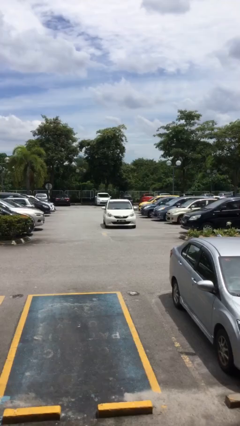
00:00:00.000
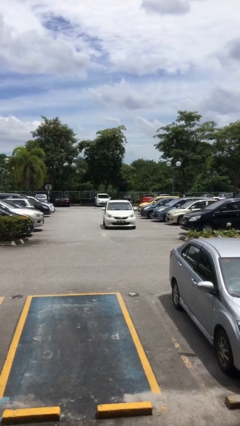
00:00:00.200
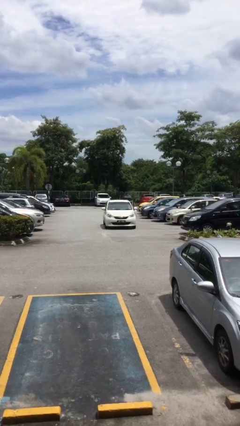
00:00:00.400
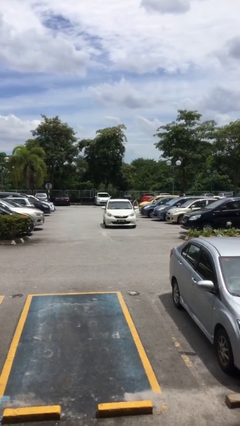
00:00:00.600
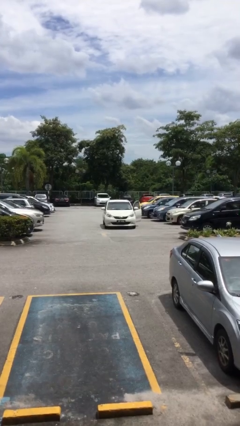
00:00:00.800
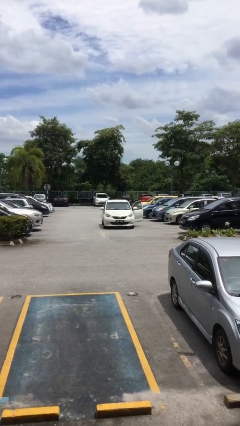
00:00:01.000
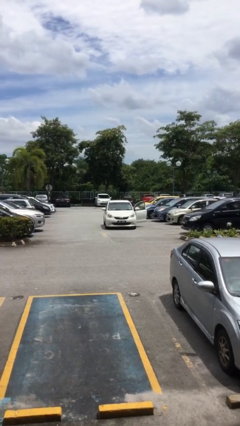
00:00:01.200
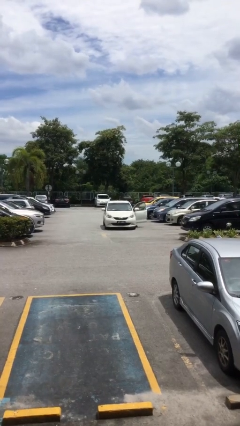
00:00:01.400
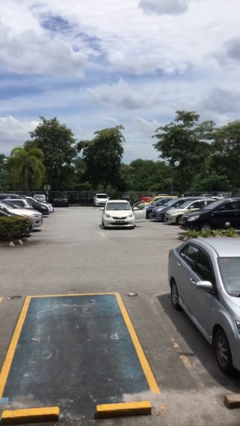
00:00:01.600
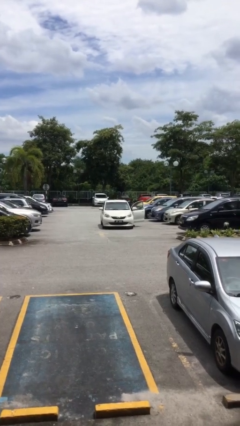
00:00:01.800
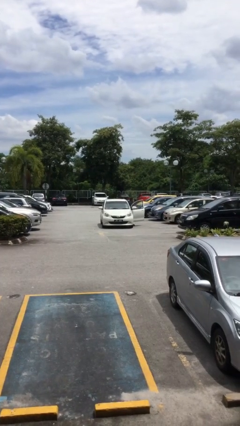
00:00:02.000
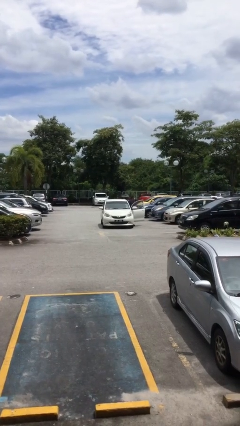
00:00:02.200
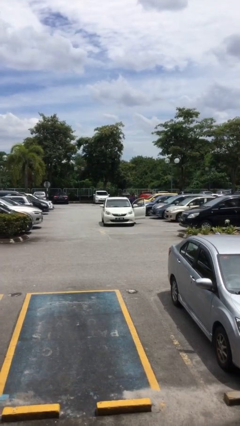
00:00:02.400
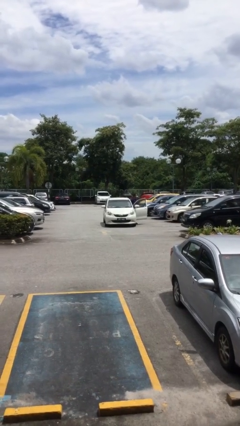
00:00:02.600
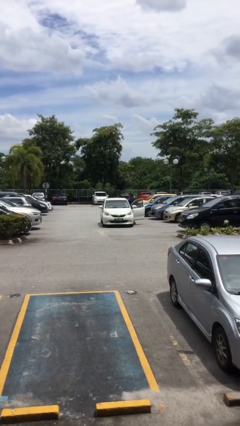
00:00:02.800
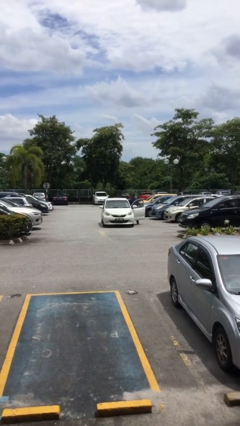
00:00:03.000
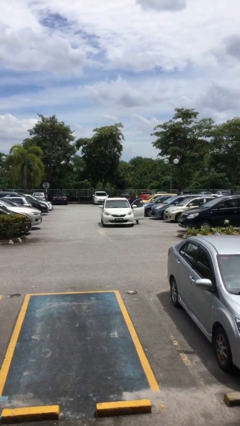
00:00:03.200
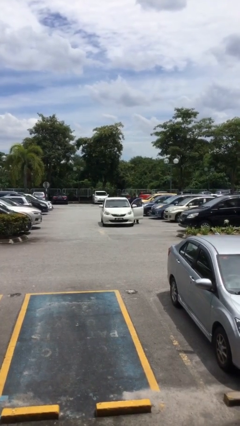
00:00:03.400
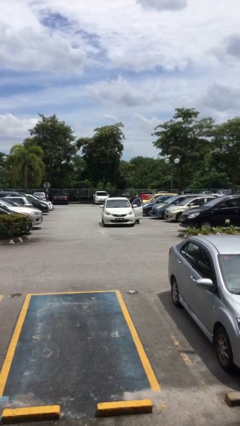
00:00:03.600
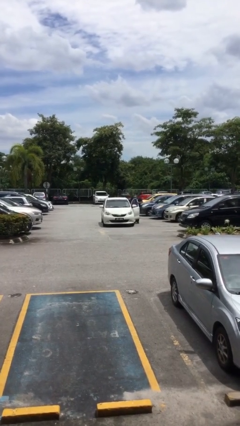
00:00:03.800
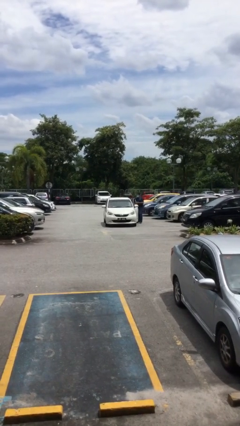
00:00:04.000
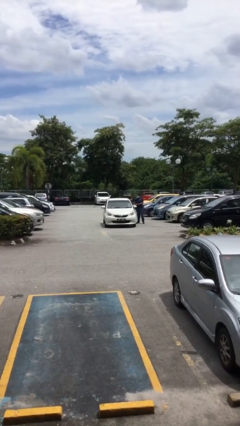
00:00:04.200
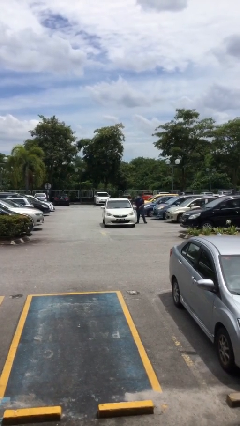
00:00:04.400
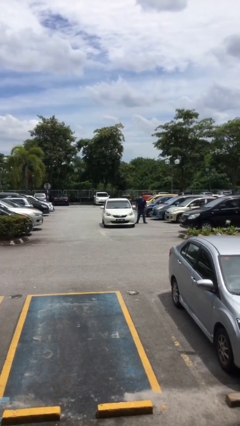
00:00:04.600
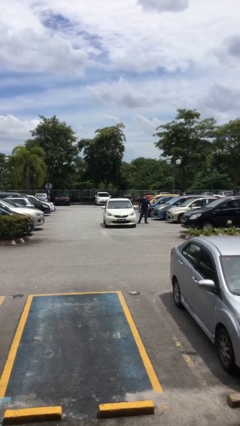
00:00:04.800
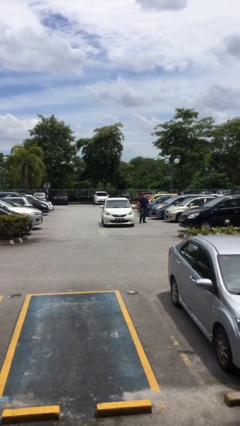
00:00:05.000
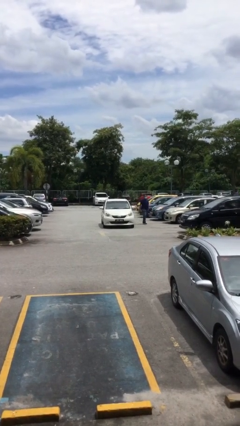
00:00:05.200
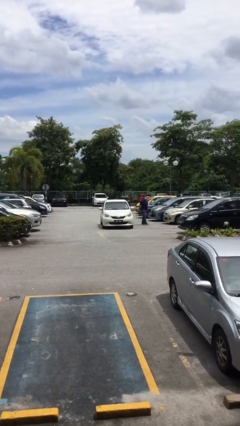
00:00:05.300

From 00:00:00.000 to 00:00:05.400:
car drops off person

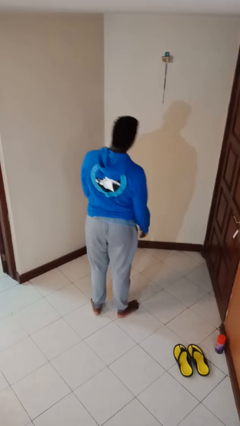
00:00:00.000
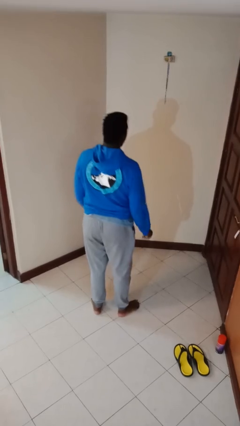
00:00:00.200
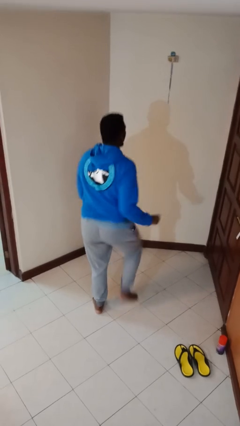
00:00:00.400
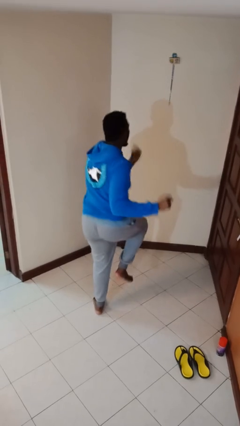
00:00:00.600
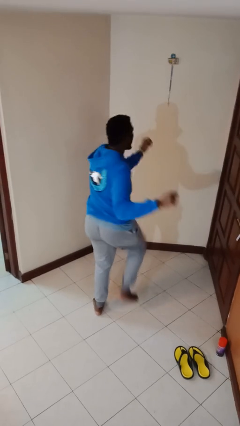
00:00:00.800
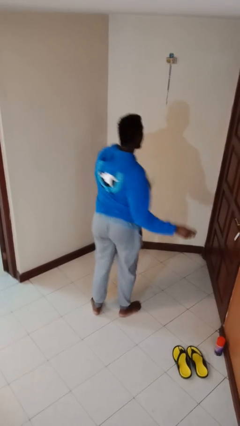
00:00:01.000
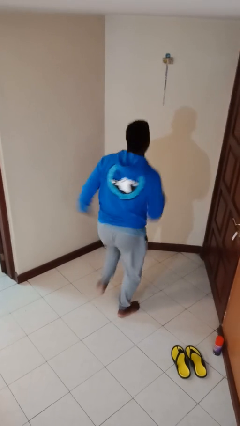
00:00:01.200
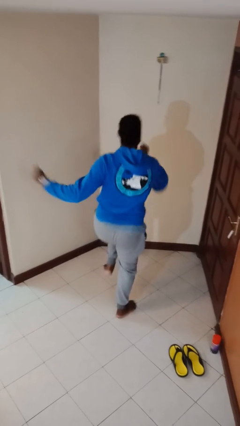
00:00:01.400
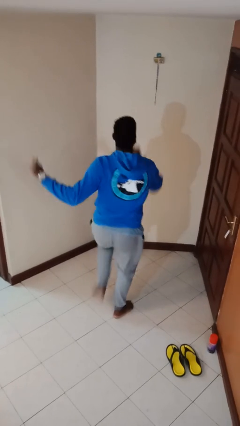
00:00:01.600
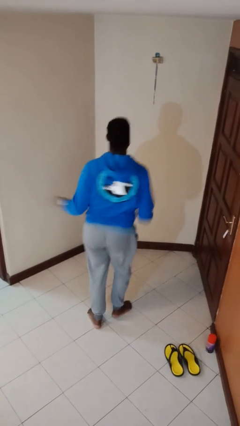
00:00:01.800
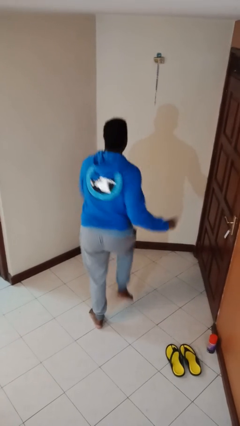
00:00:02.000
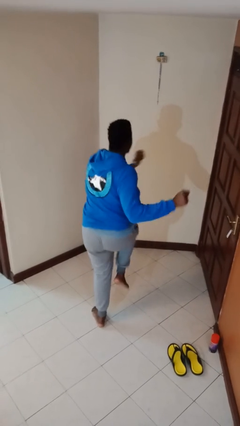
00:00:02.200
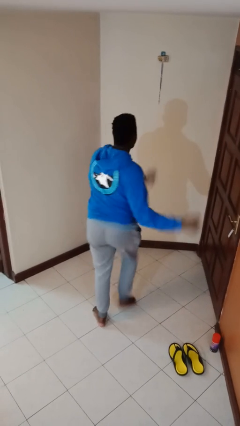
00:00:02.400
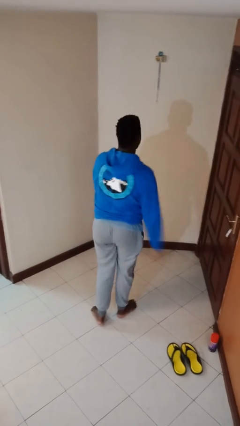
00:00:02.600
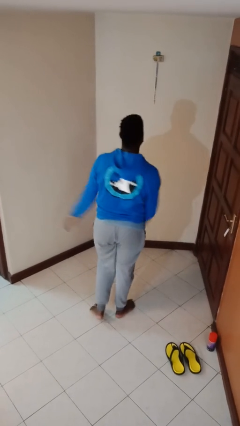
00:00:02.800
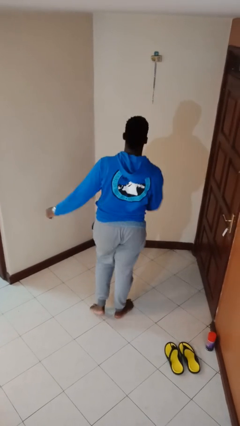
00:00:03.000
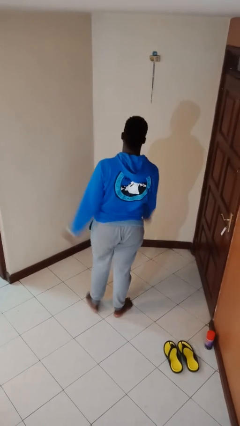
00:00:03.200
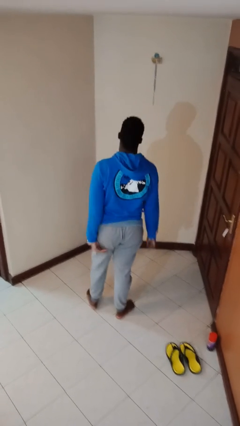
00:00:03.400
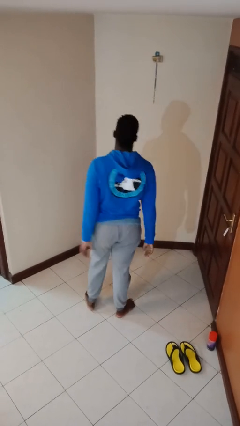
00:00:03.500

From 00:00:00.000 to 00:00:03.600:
person dances in place

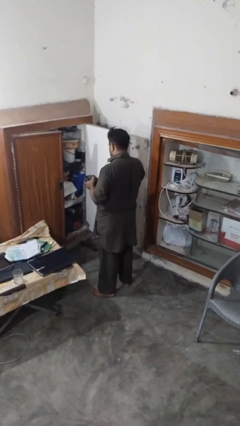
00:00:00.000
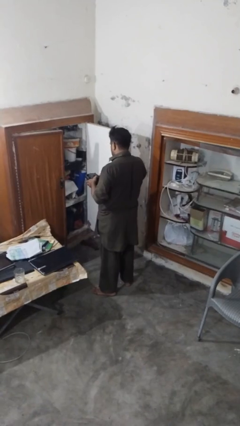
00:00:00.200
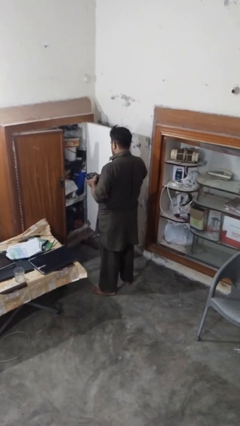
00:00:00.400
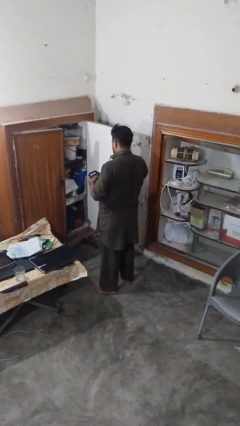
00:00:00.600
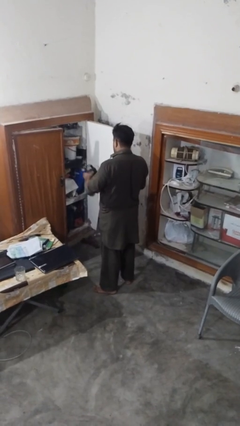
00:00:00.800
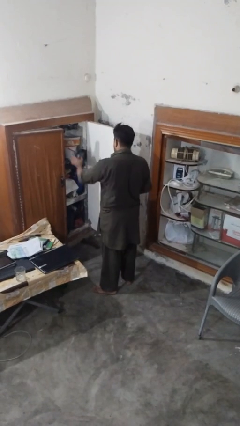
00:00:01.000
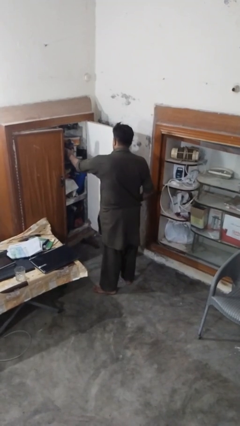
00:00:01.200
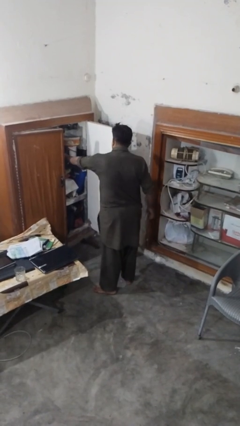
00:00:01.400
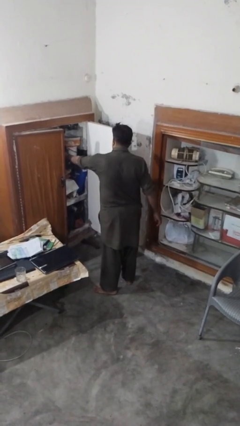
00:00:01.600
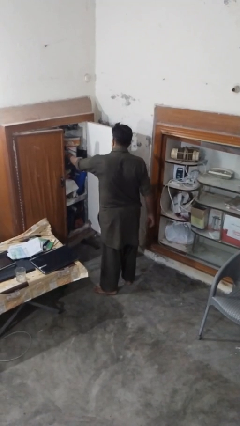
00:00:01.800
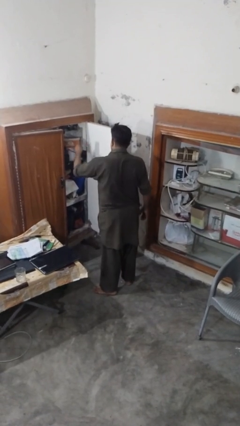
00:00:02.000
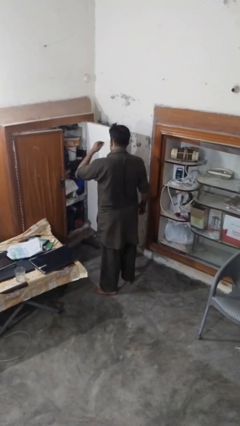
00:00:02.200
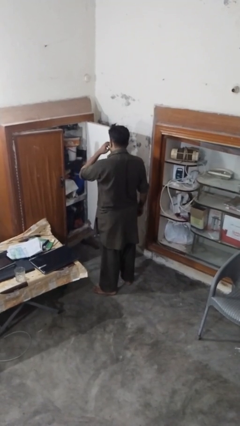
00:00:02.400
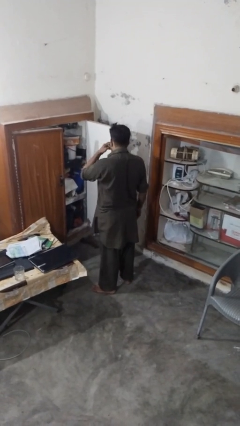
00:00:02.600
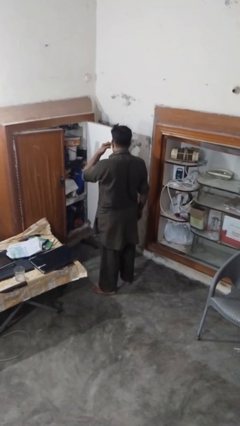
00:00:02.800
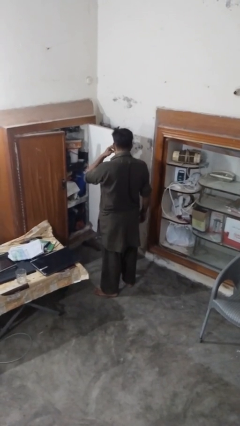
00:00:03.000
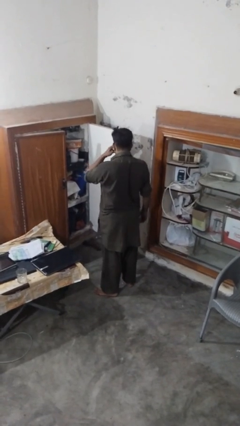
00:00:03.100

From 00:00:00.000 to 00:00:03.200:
person puts down object into cabinet

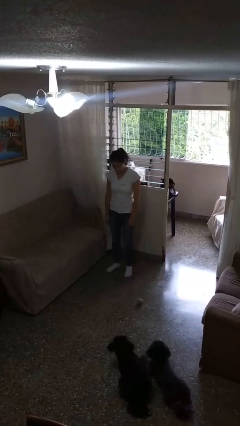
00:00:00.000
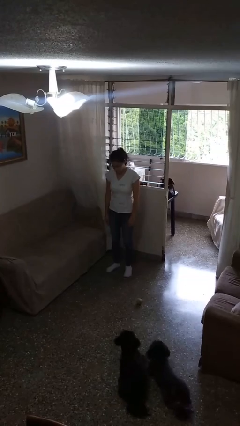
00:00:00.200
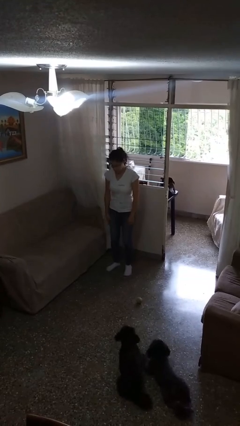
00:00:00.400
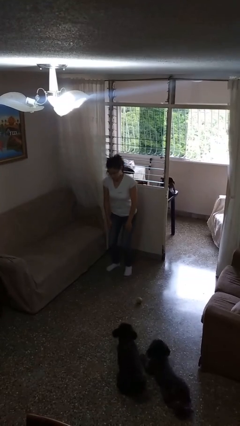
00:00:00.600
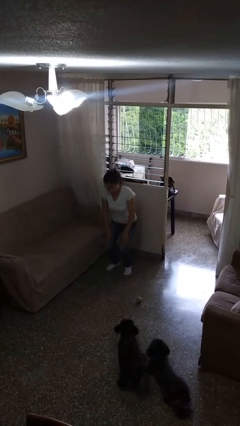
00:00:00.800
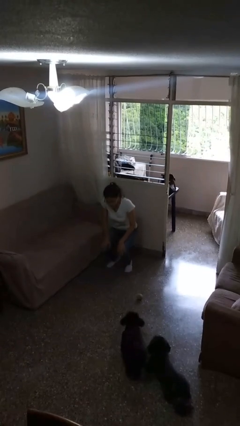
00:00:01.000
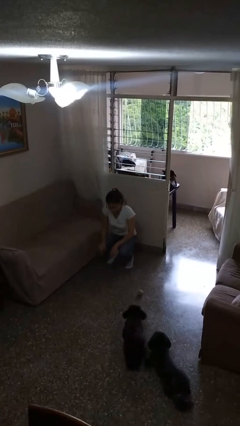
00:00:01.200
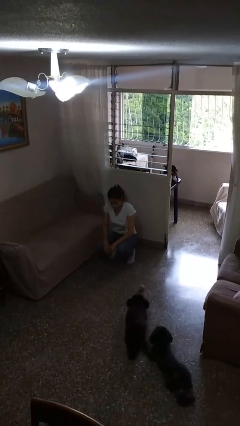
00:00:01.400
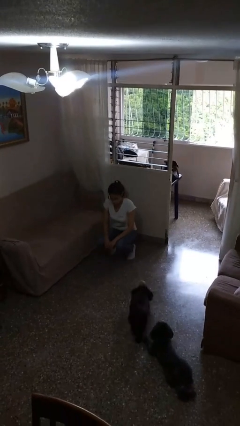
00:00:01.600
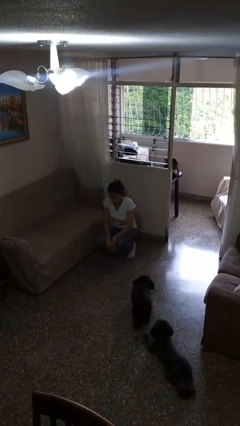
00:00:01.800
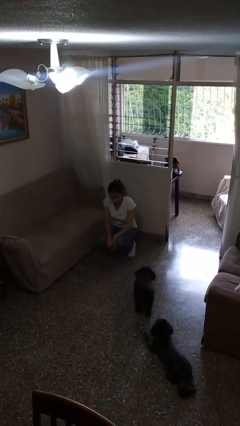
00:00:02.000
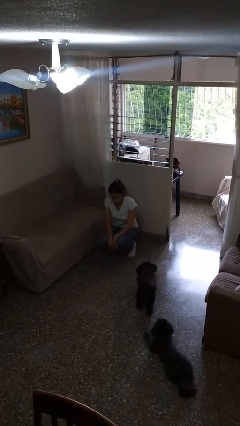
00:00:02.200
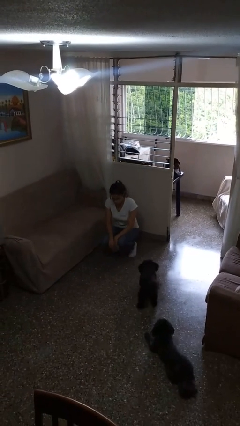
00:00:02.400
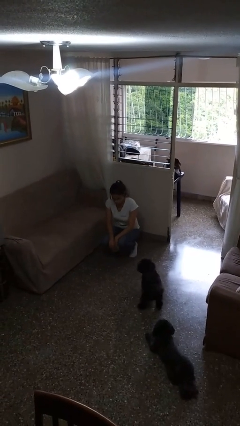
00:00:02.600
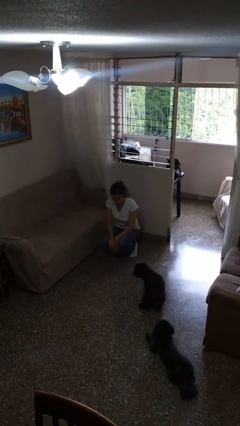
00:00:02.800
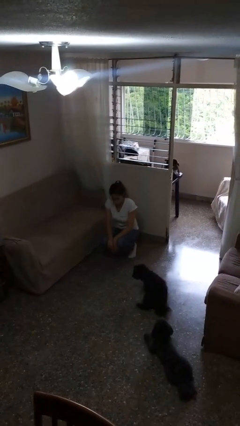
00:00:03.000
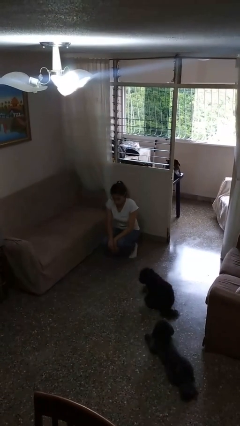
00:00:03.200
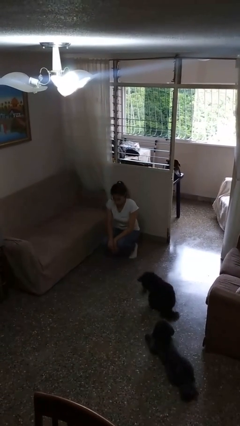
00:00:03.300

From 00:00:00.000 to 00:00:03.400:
person squats

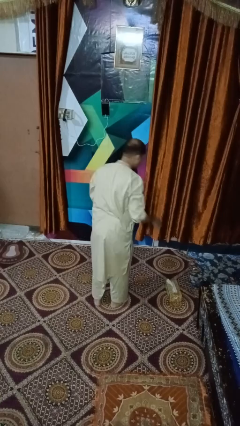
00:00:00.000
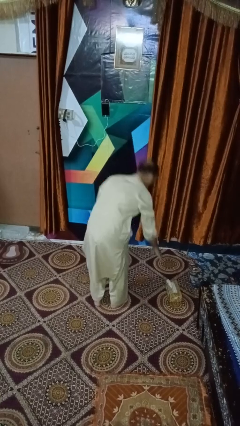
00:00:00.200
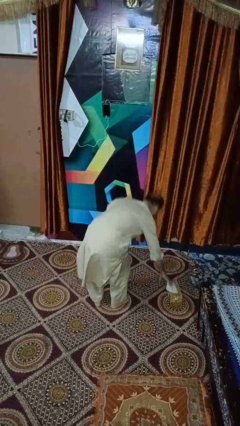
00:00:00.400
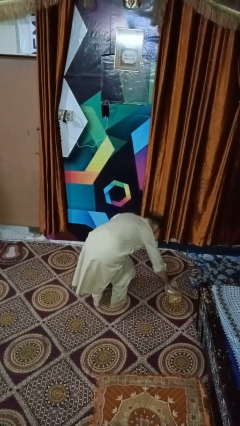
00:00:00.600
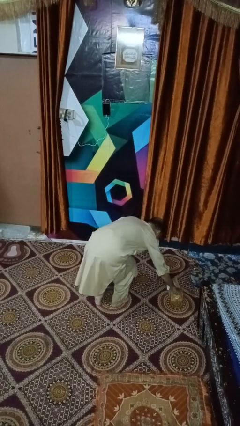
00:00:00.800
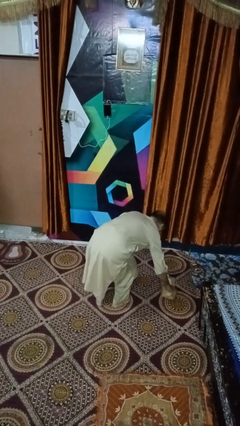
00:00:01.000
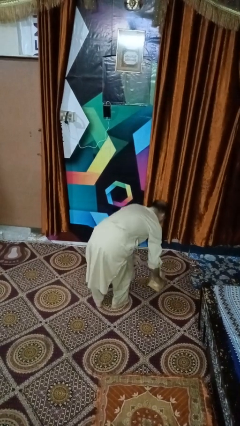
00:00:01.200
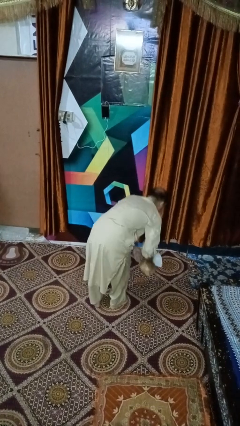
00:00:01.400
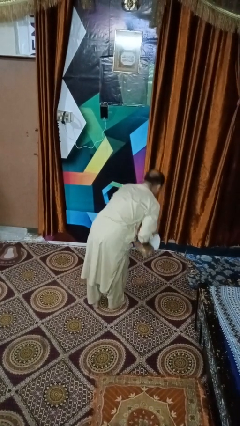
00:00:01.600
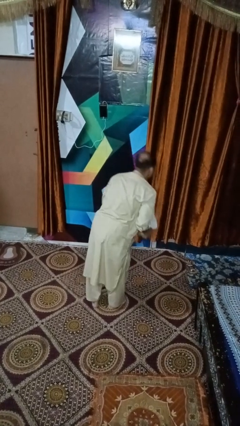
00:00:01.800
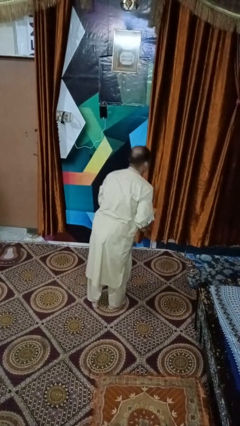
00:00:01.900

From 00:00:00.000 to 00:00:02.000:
person picks up object from floor

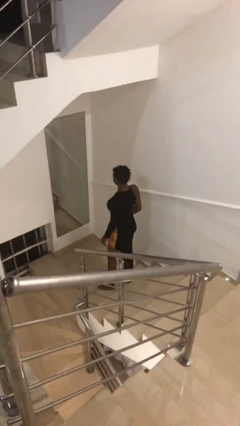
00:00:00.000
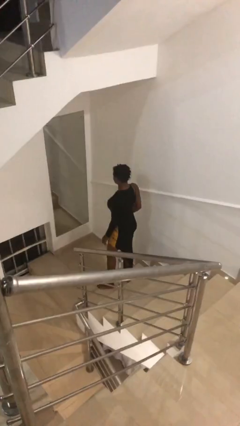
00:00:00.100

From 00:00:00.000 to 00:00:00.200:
person climbs up stairs
